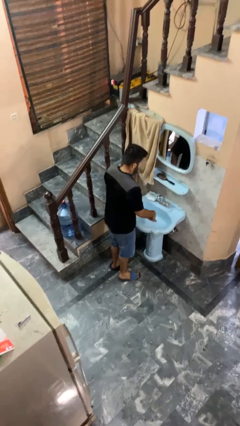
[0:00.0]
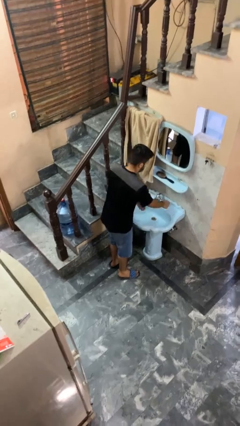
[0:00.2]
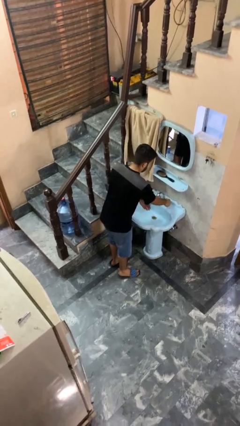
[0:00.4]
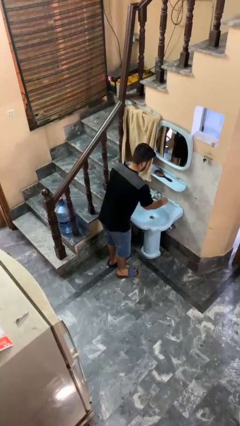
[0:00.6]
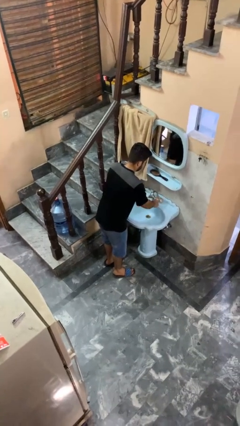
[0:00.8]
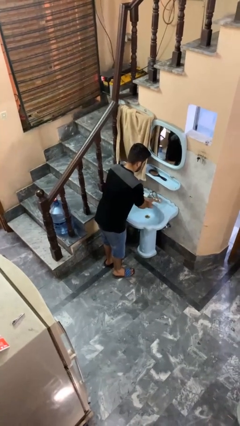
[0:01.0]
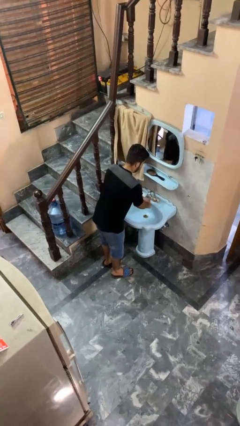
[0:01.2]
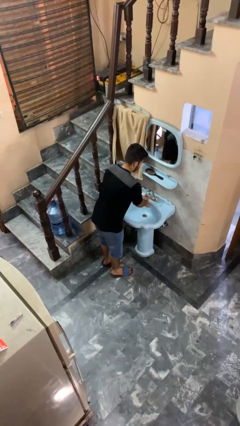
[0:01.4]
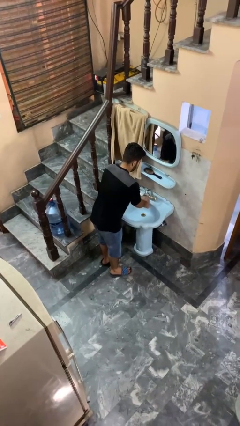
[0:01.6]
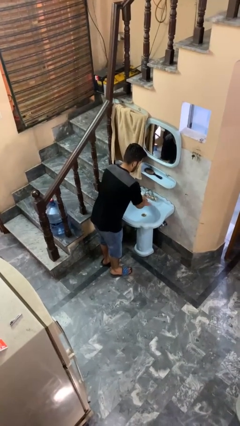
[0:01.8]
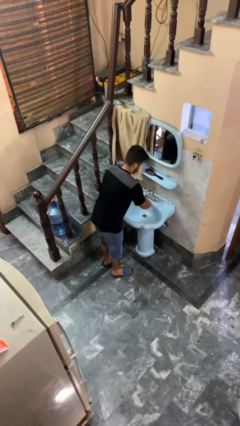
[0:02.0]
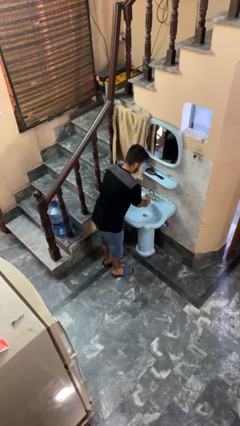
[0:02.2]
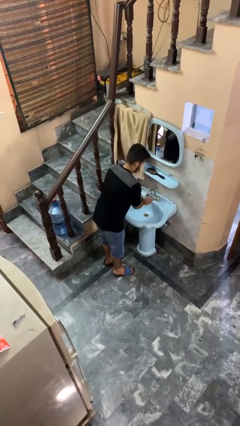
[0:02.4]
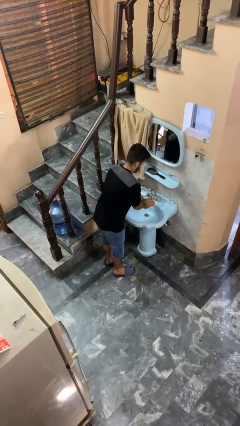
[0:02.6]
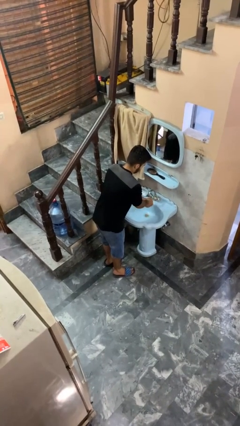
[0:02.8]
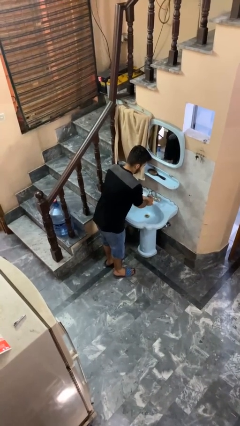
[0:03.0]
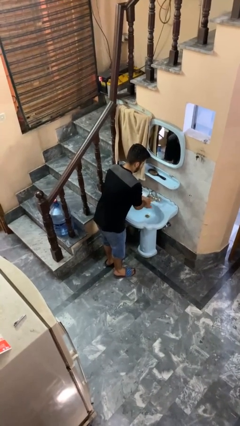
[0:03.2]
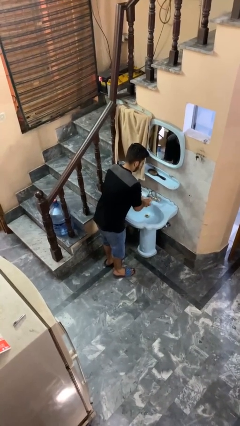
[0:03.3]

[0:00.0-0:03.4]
person washes hands

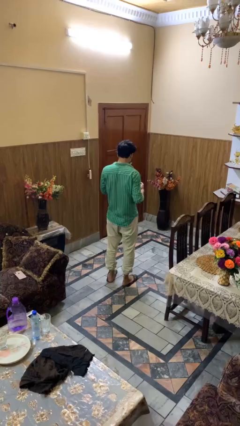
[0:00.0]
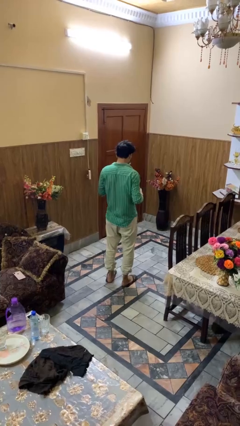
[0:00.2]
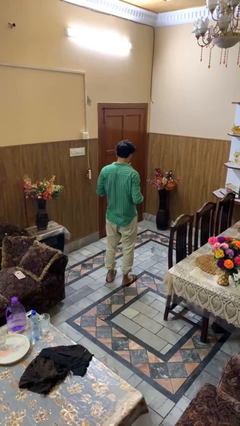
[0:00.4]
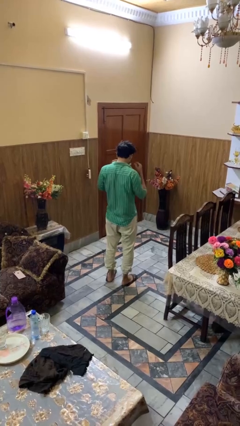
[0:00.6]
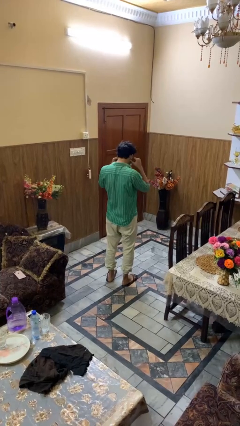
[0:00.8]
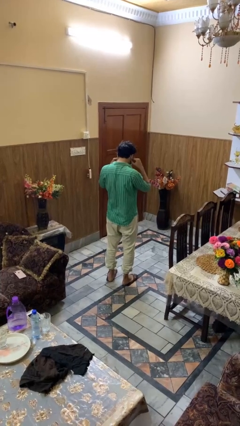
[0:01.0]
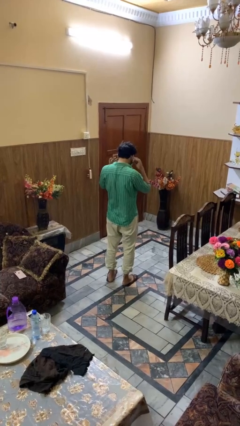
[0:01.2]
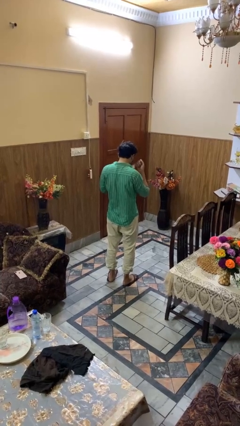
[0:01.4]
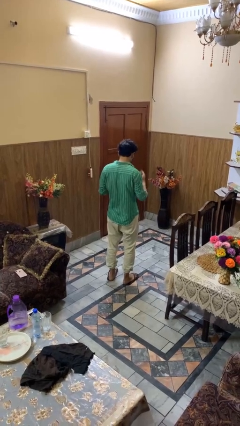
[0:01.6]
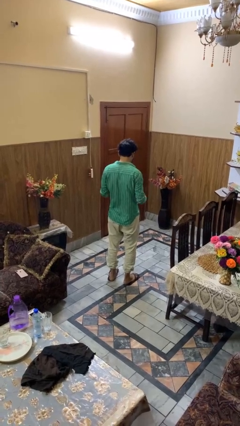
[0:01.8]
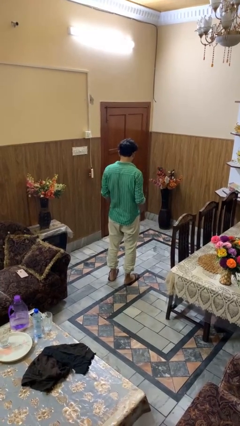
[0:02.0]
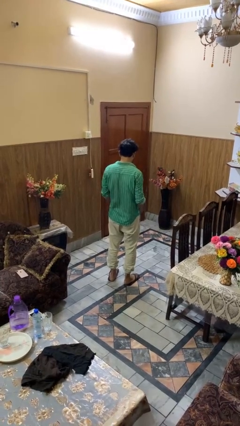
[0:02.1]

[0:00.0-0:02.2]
person takes off facemask

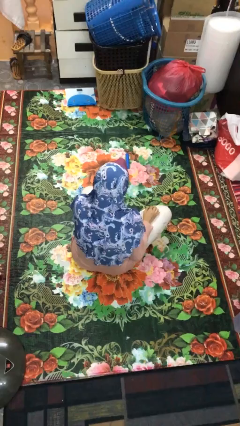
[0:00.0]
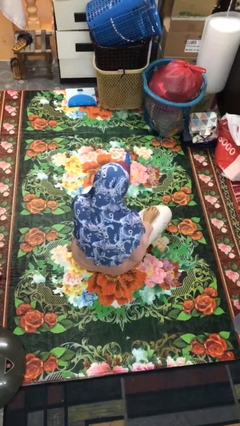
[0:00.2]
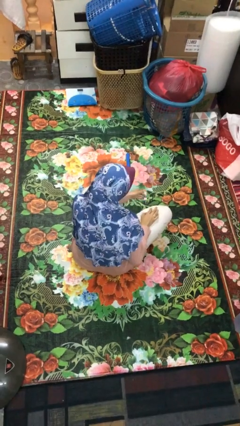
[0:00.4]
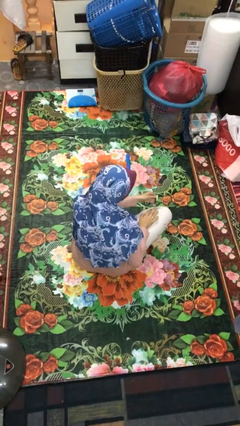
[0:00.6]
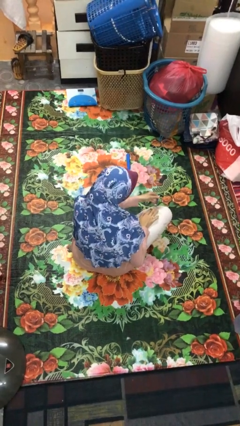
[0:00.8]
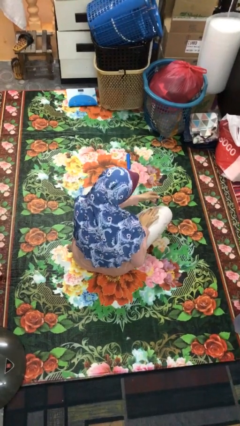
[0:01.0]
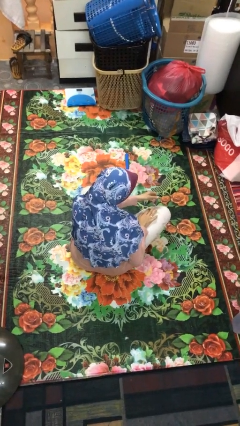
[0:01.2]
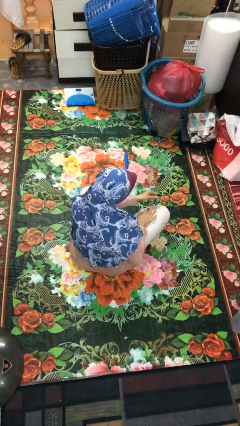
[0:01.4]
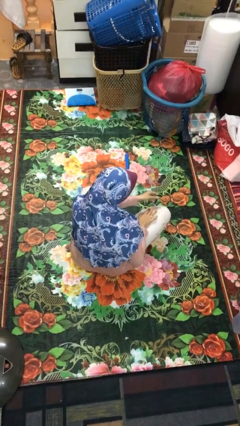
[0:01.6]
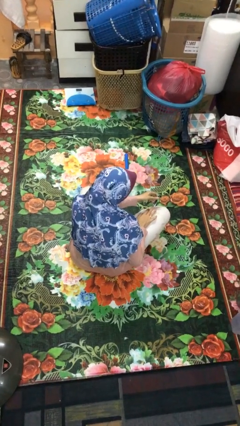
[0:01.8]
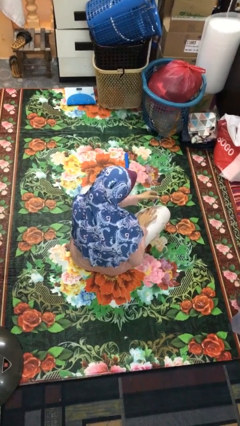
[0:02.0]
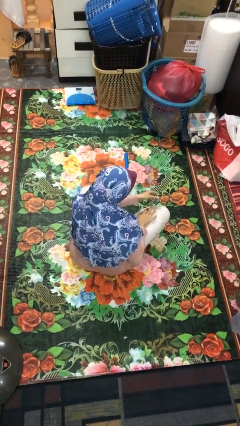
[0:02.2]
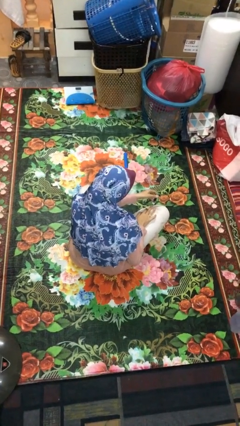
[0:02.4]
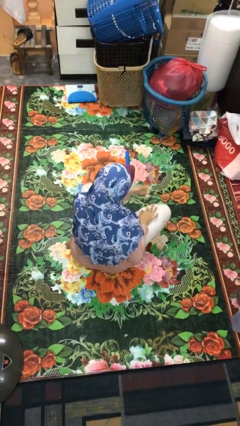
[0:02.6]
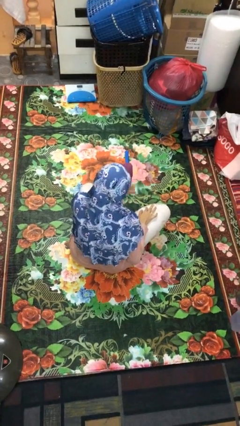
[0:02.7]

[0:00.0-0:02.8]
person clips fingernails

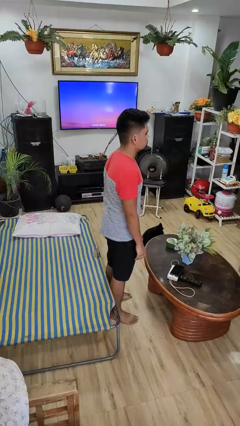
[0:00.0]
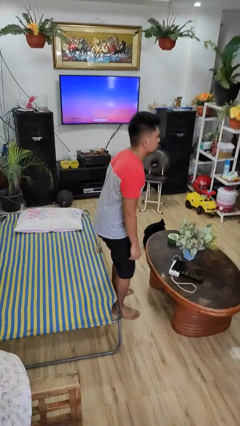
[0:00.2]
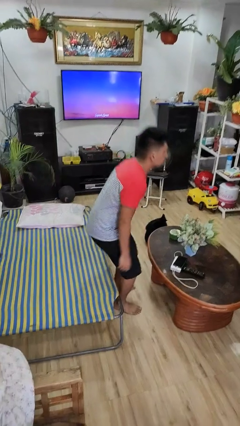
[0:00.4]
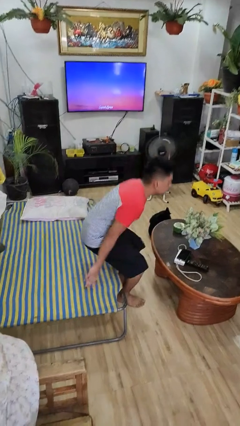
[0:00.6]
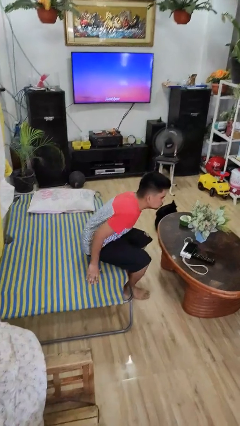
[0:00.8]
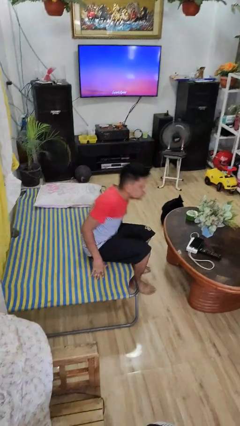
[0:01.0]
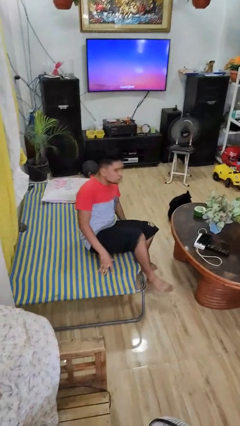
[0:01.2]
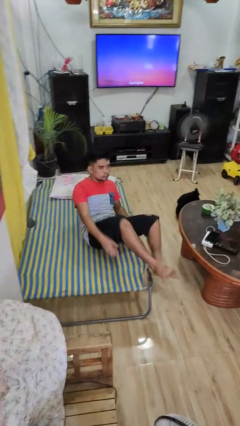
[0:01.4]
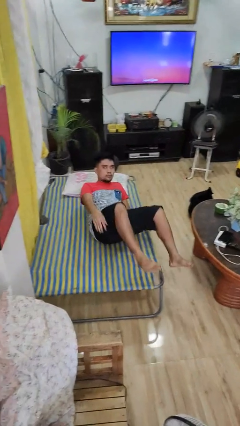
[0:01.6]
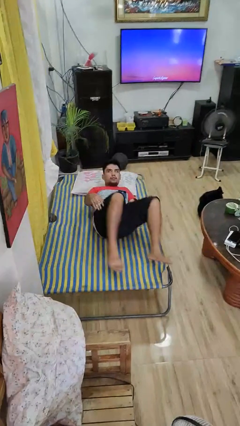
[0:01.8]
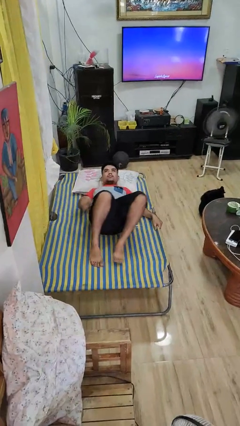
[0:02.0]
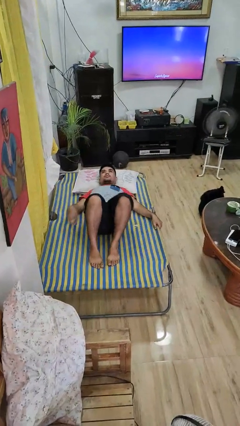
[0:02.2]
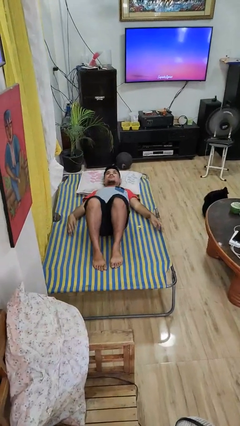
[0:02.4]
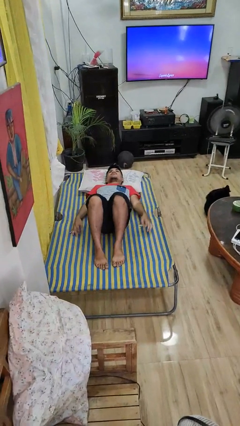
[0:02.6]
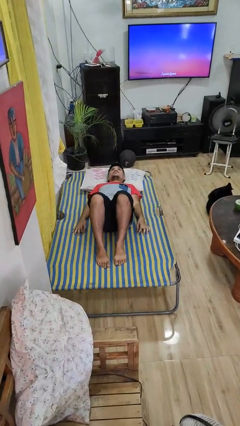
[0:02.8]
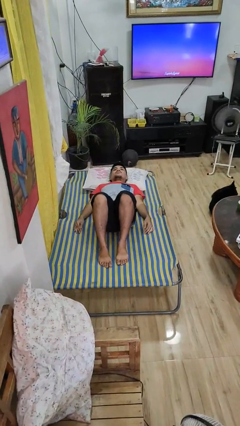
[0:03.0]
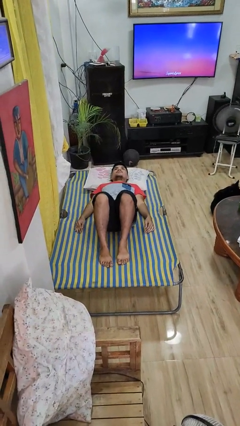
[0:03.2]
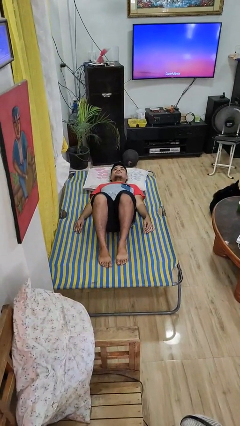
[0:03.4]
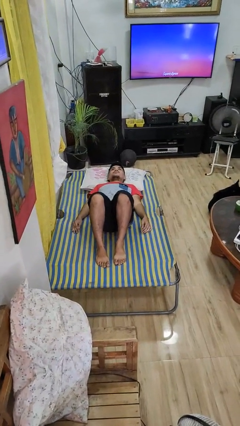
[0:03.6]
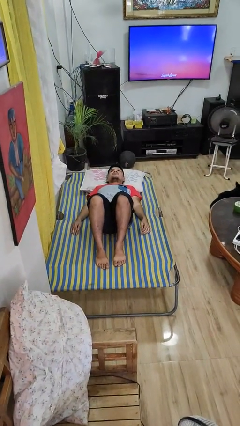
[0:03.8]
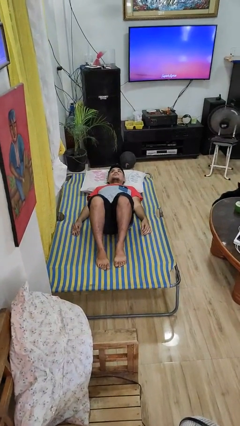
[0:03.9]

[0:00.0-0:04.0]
person lies down on bed

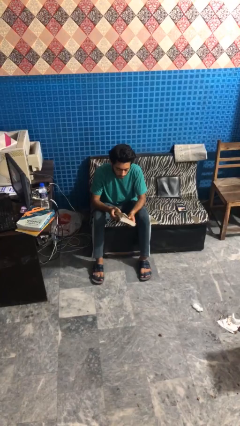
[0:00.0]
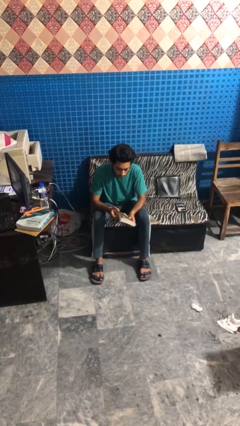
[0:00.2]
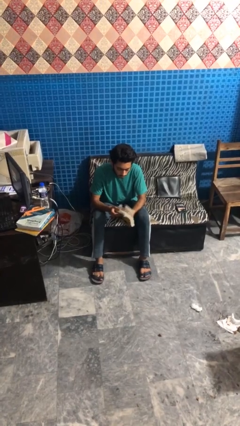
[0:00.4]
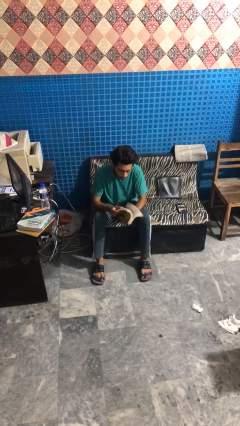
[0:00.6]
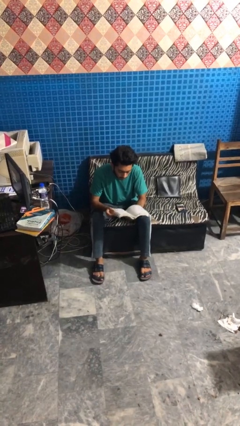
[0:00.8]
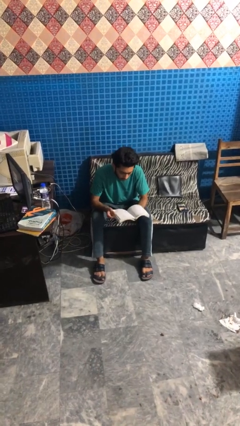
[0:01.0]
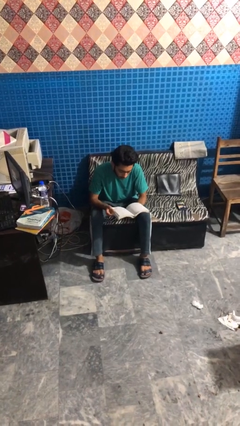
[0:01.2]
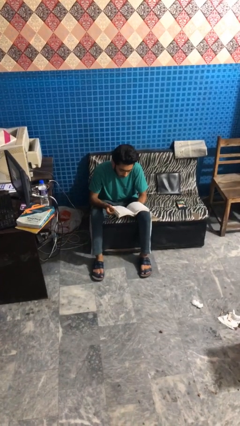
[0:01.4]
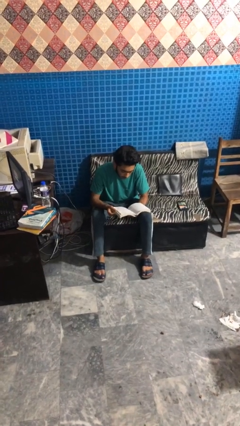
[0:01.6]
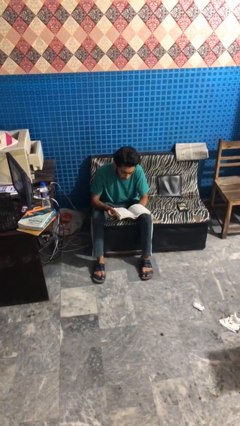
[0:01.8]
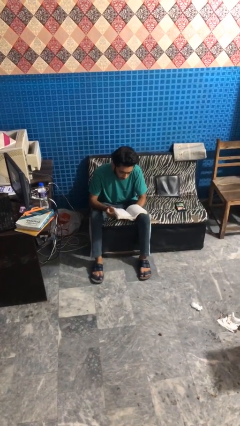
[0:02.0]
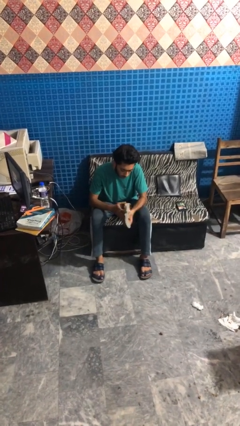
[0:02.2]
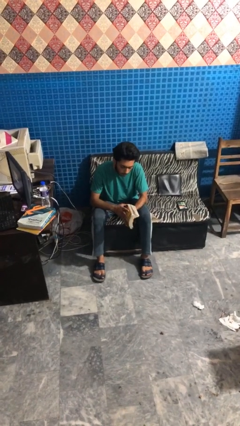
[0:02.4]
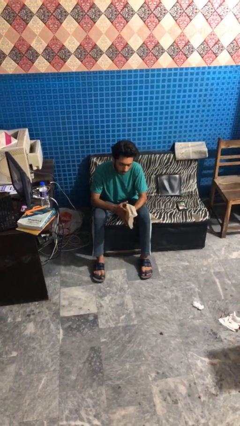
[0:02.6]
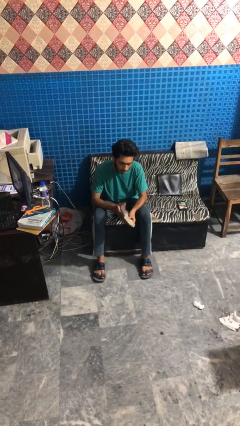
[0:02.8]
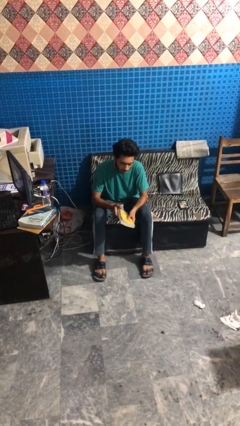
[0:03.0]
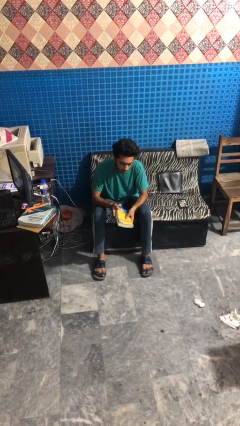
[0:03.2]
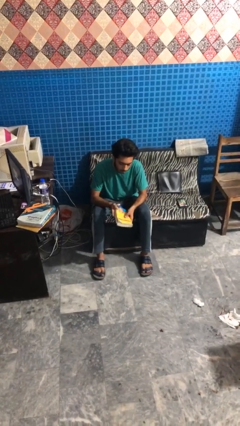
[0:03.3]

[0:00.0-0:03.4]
person reads magazine

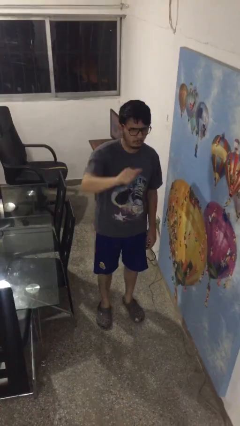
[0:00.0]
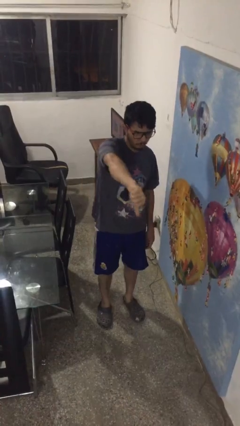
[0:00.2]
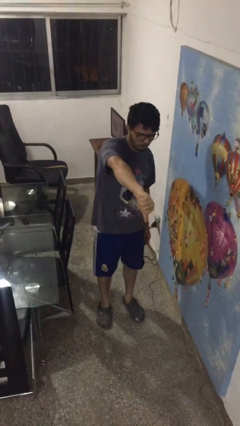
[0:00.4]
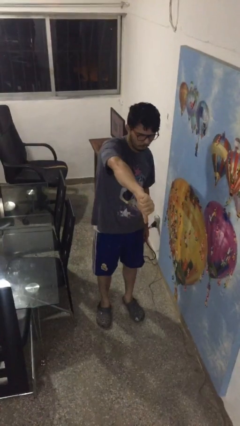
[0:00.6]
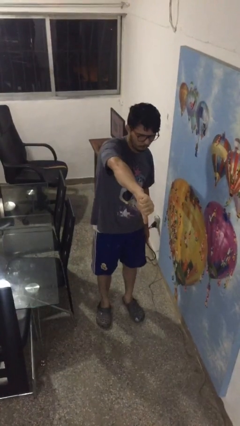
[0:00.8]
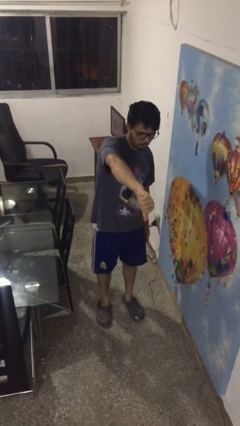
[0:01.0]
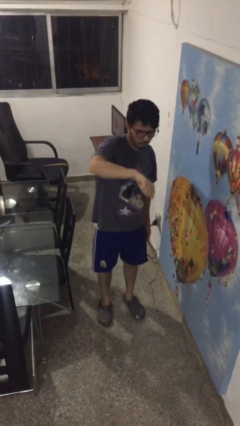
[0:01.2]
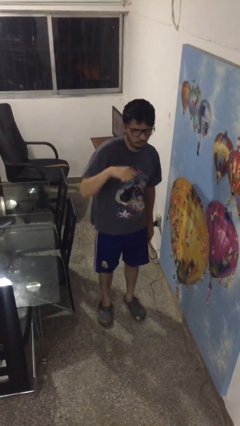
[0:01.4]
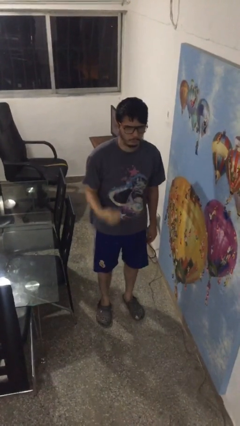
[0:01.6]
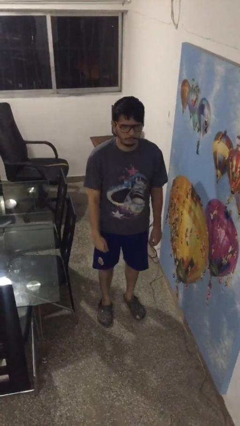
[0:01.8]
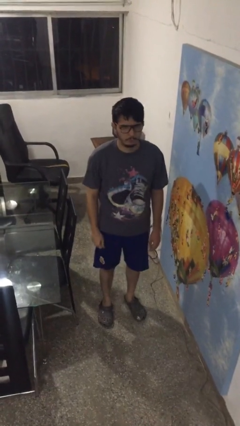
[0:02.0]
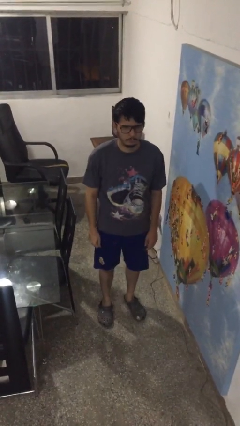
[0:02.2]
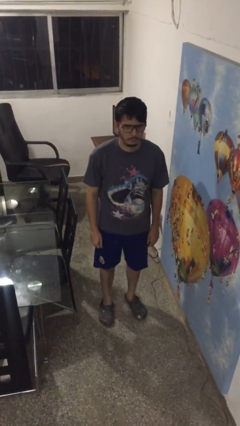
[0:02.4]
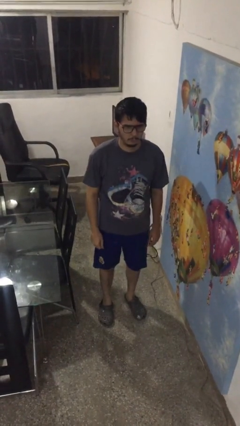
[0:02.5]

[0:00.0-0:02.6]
person gestures thumbs down
